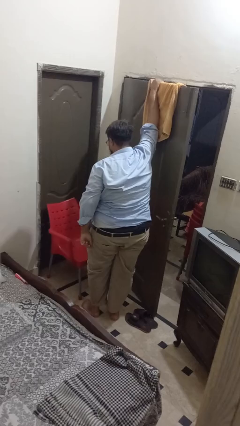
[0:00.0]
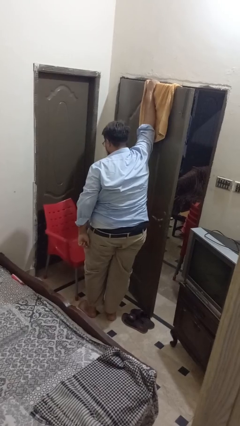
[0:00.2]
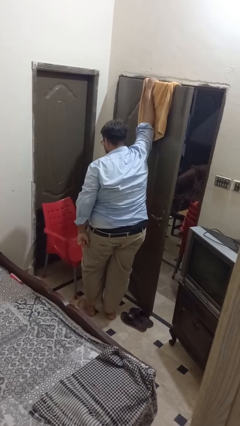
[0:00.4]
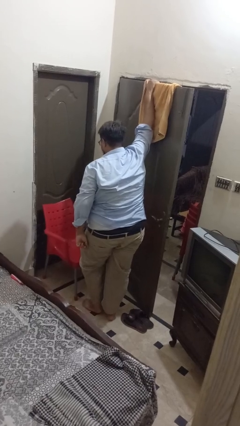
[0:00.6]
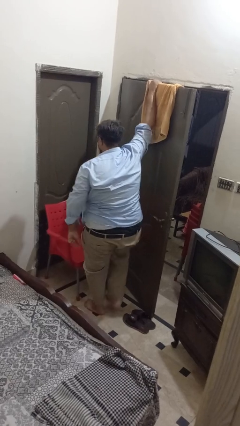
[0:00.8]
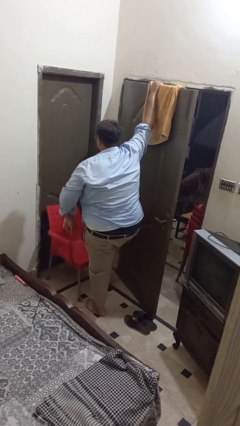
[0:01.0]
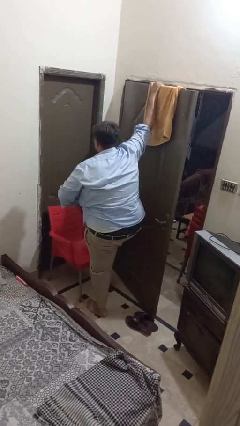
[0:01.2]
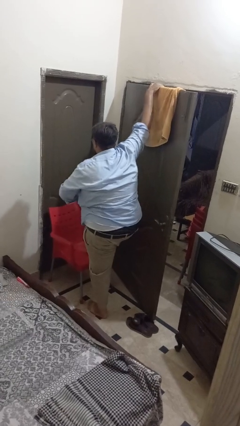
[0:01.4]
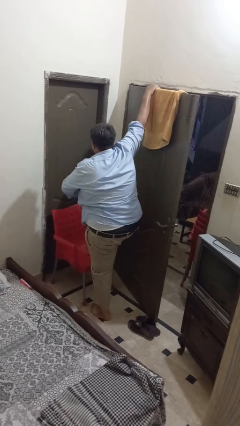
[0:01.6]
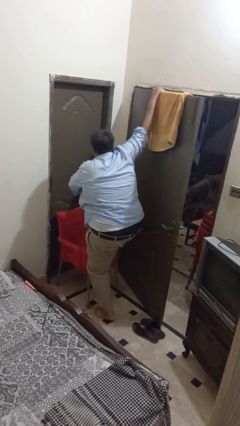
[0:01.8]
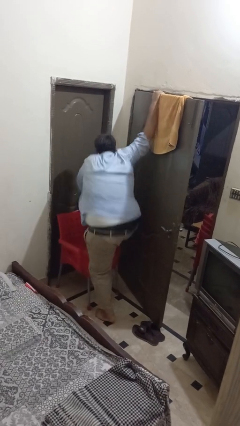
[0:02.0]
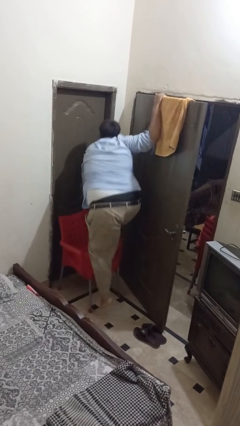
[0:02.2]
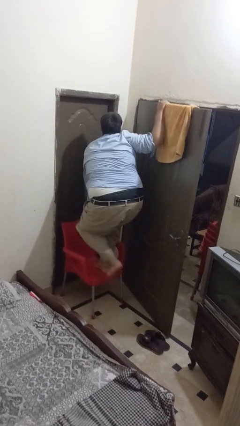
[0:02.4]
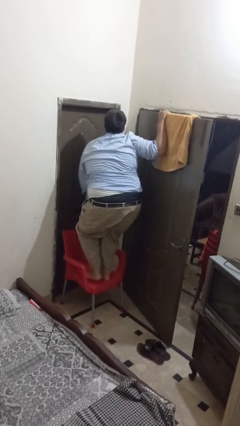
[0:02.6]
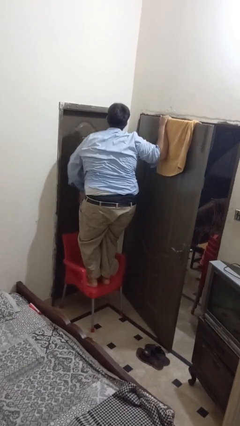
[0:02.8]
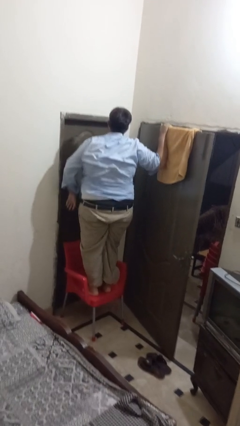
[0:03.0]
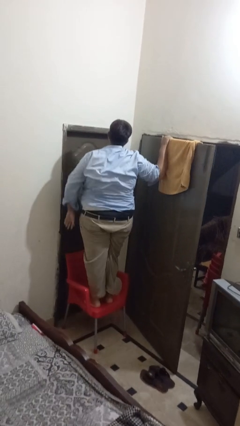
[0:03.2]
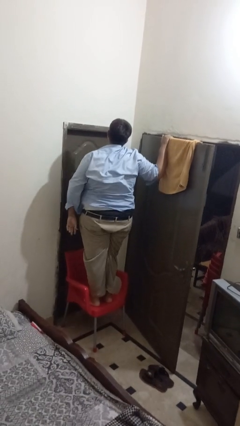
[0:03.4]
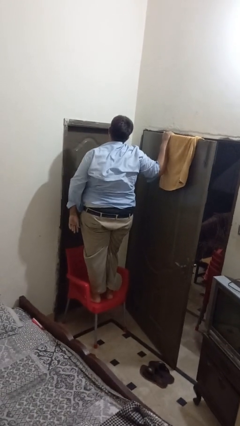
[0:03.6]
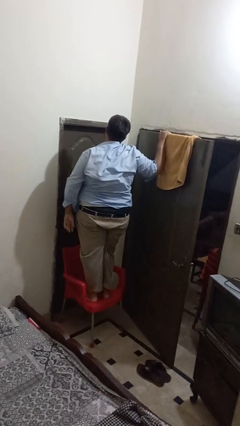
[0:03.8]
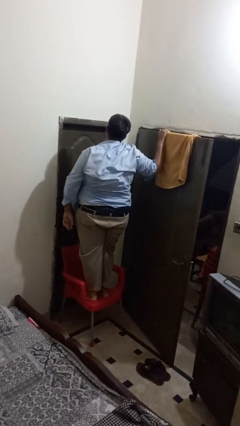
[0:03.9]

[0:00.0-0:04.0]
person climbs on chair

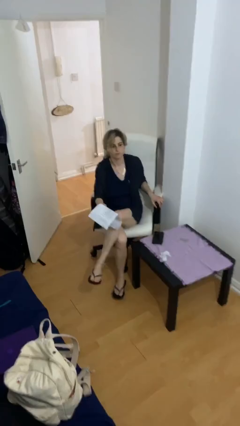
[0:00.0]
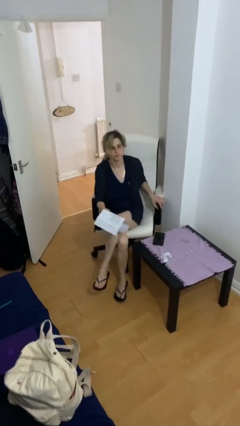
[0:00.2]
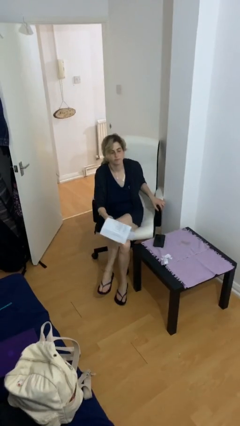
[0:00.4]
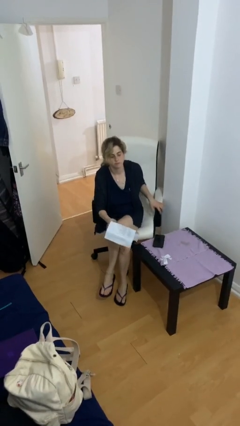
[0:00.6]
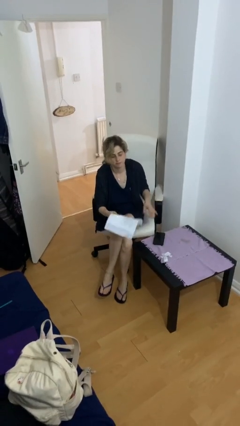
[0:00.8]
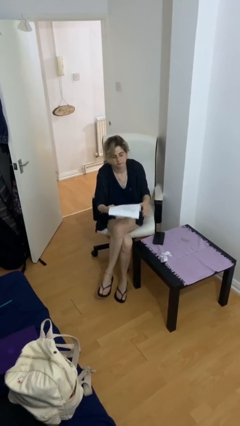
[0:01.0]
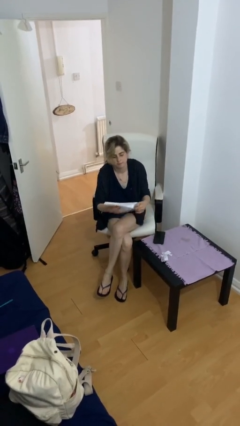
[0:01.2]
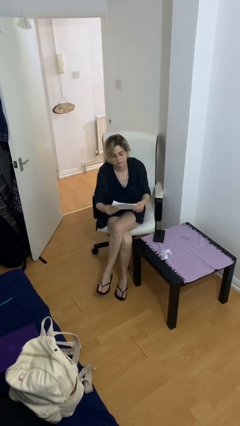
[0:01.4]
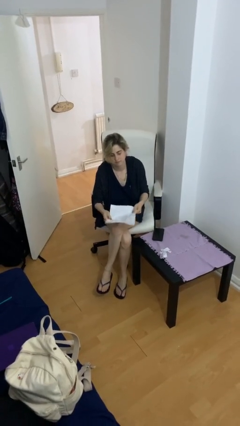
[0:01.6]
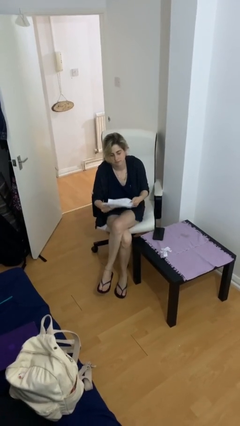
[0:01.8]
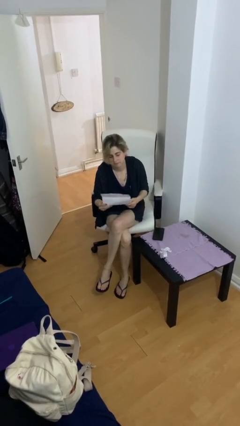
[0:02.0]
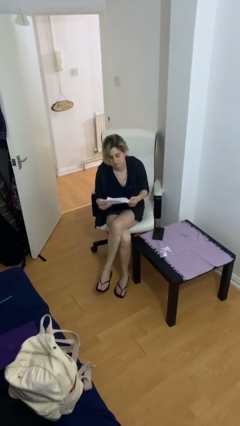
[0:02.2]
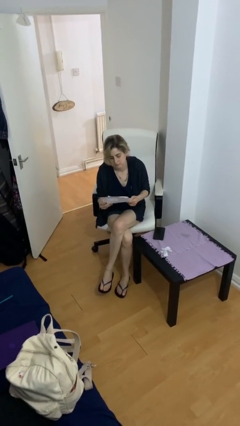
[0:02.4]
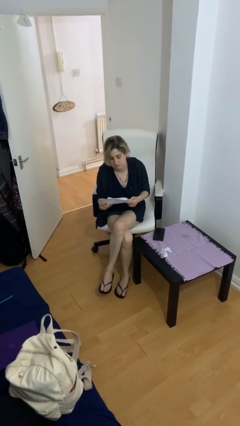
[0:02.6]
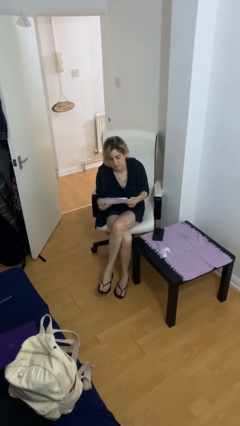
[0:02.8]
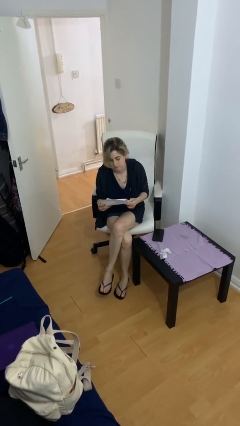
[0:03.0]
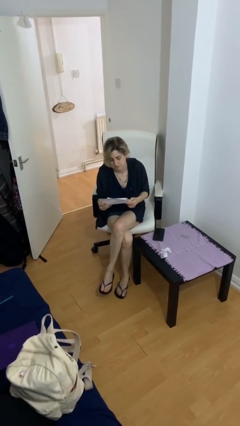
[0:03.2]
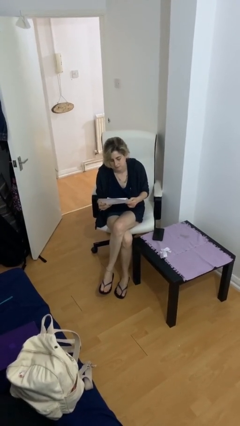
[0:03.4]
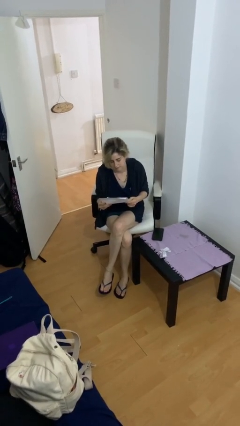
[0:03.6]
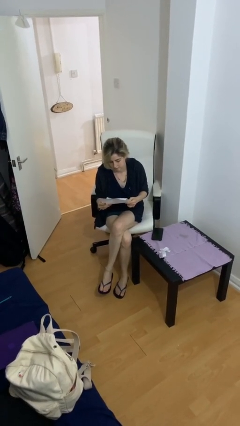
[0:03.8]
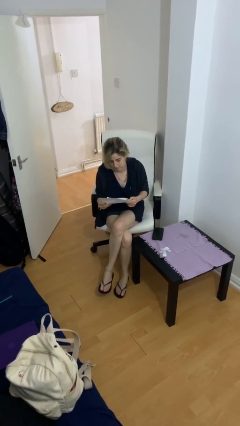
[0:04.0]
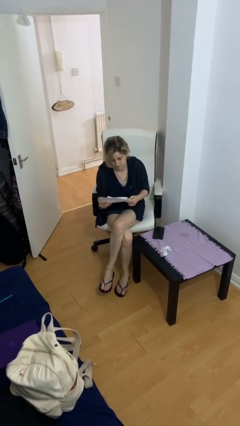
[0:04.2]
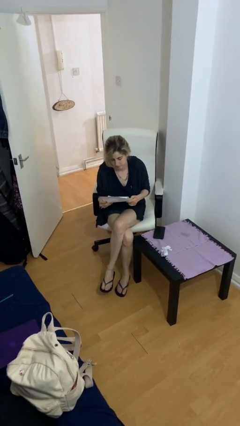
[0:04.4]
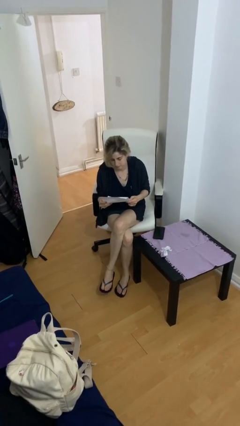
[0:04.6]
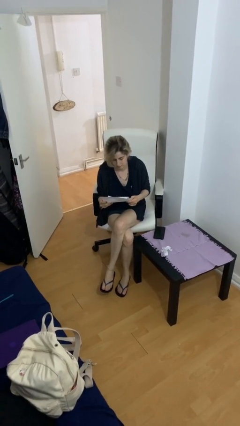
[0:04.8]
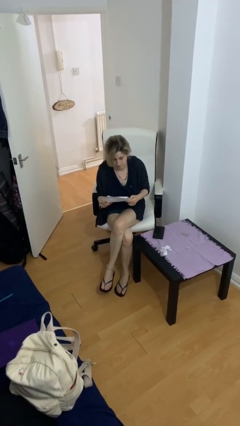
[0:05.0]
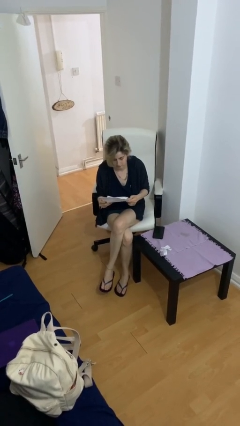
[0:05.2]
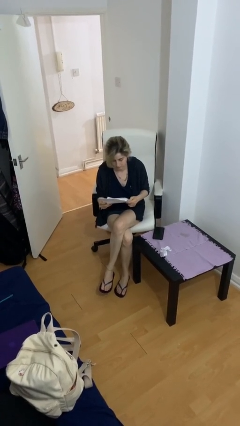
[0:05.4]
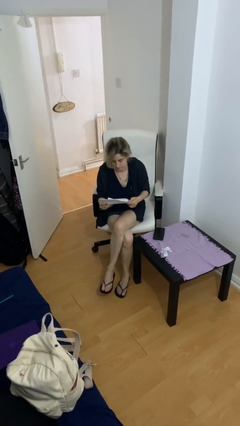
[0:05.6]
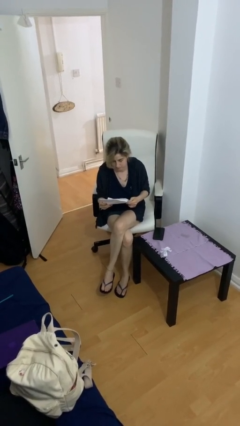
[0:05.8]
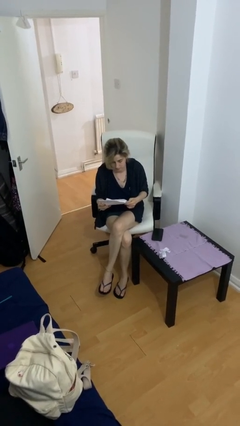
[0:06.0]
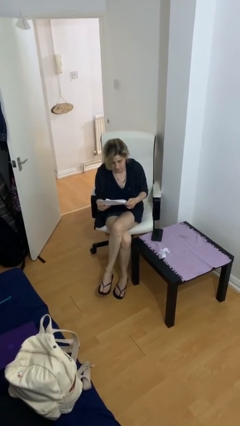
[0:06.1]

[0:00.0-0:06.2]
person reads document

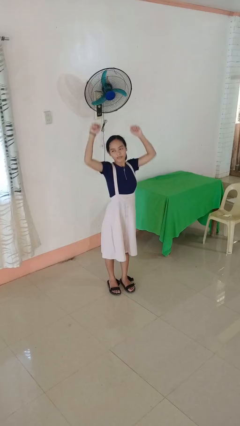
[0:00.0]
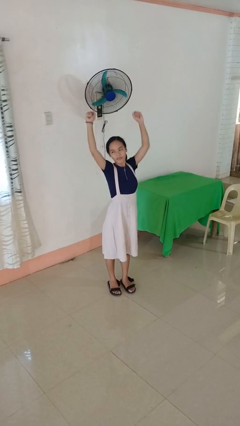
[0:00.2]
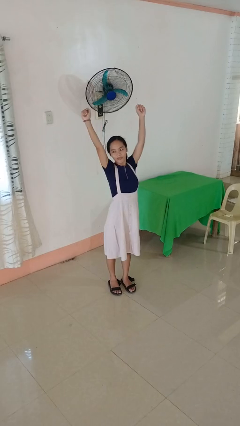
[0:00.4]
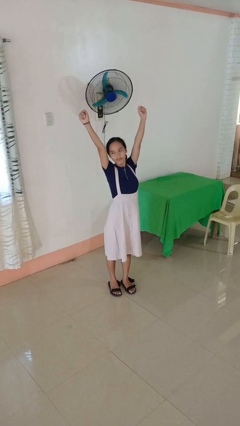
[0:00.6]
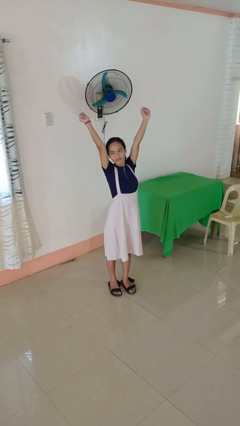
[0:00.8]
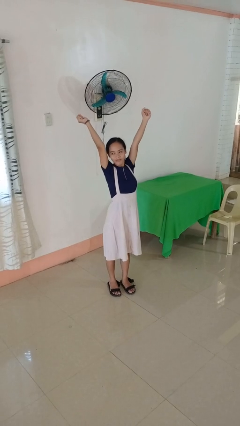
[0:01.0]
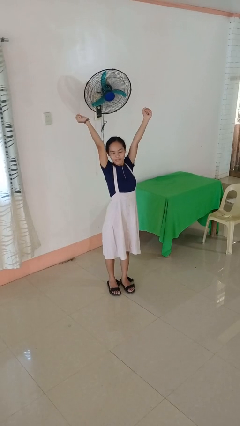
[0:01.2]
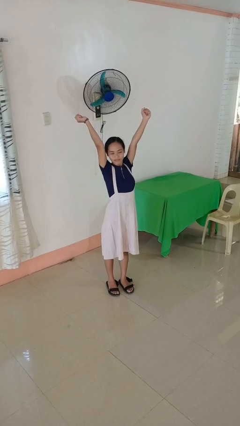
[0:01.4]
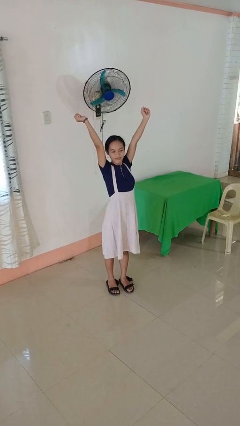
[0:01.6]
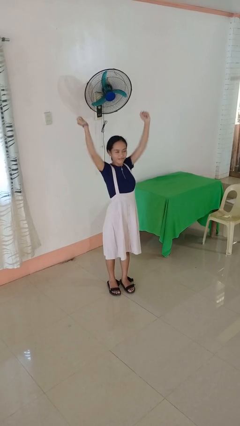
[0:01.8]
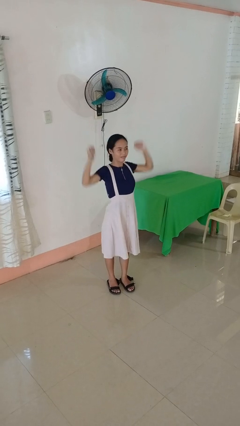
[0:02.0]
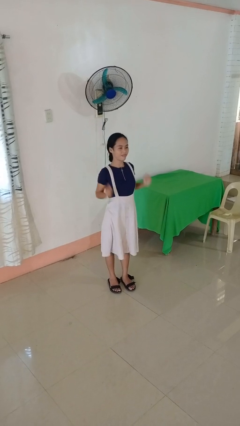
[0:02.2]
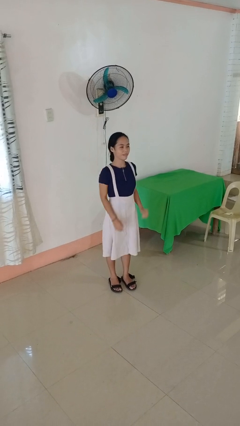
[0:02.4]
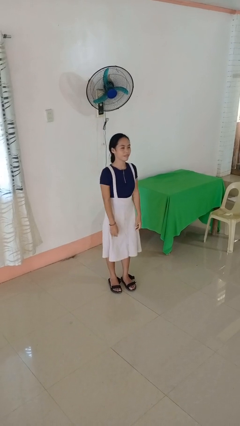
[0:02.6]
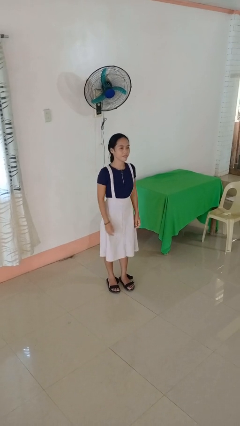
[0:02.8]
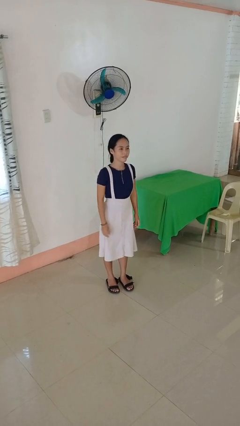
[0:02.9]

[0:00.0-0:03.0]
person stretches arms over head

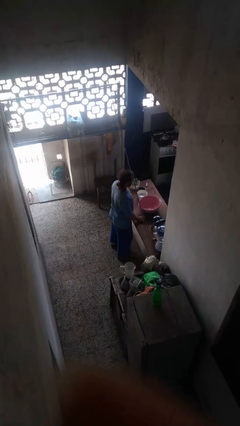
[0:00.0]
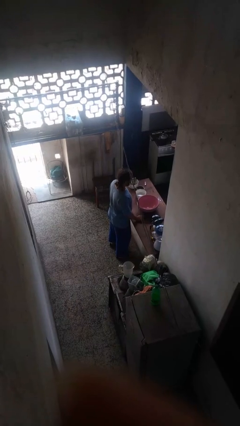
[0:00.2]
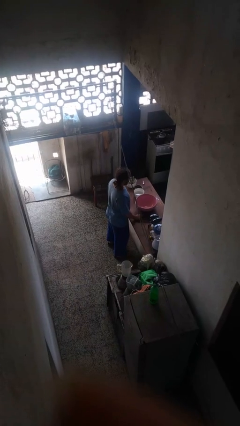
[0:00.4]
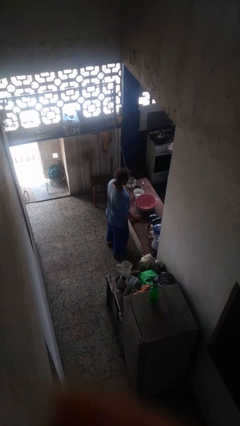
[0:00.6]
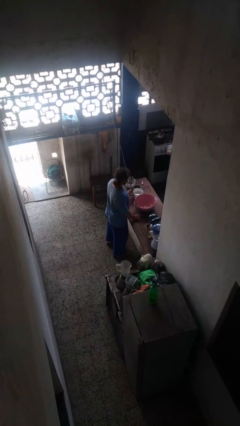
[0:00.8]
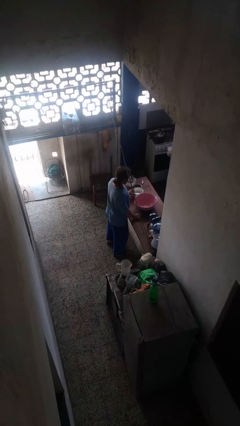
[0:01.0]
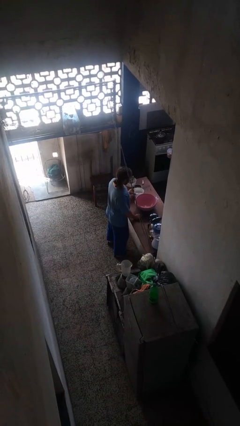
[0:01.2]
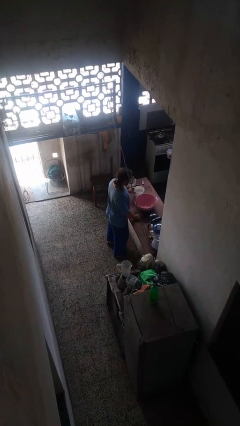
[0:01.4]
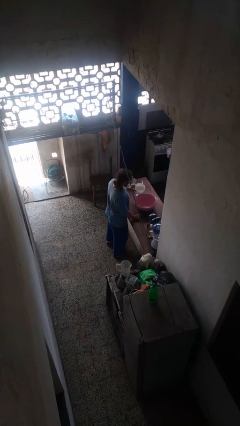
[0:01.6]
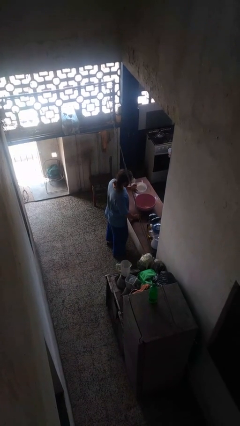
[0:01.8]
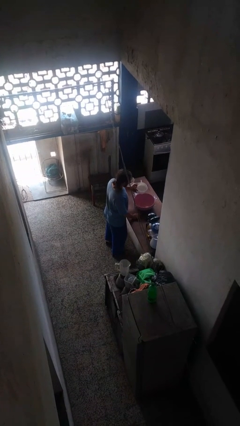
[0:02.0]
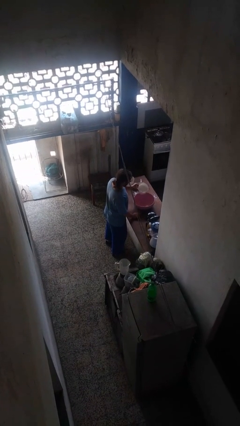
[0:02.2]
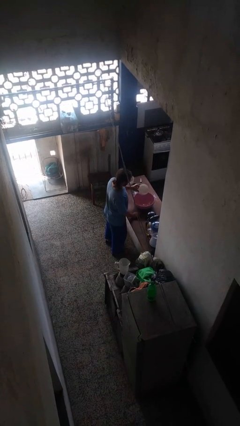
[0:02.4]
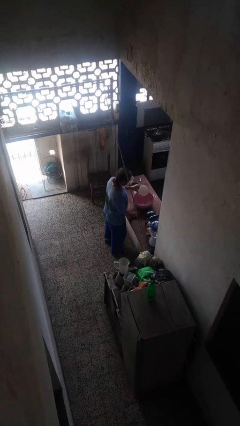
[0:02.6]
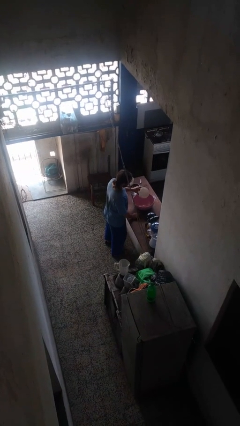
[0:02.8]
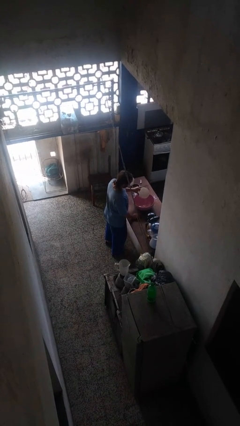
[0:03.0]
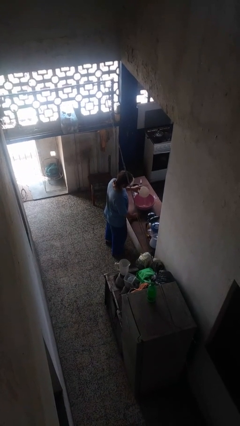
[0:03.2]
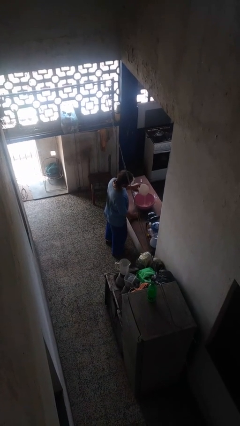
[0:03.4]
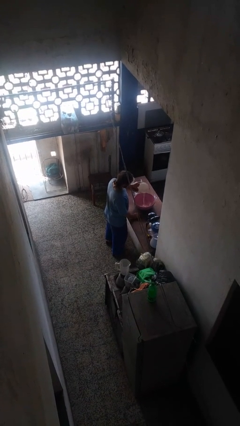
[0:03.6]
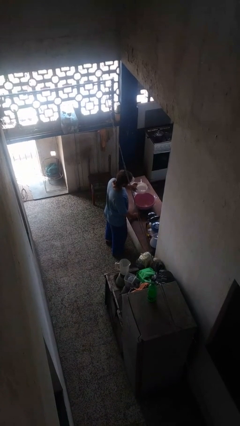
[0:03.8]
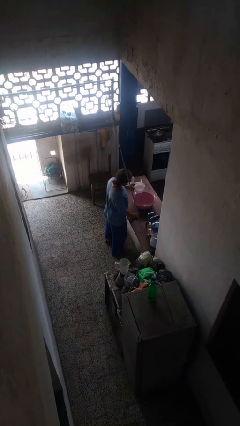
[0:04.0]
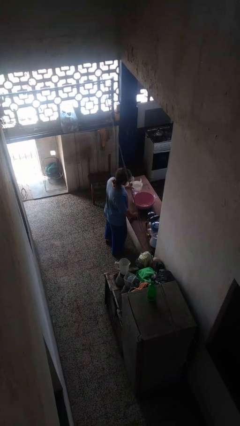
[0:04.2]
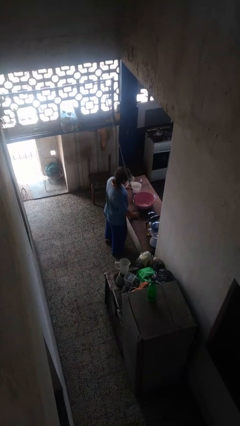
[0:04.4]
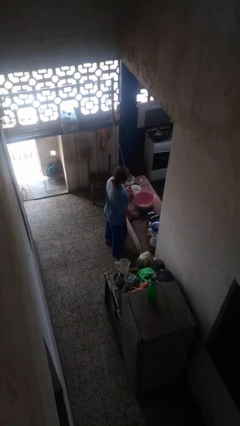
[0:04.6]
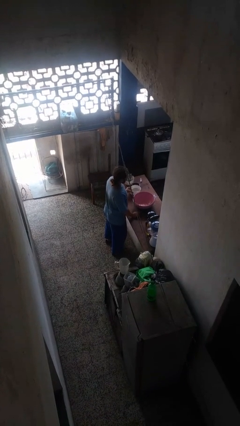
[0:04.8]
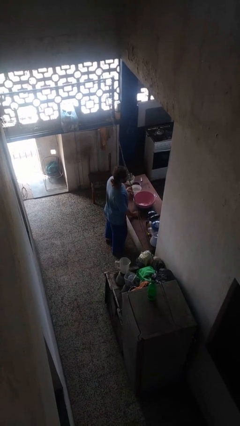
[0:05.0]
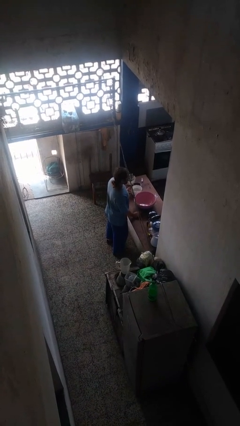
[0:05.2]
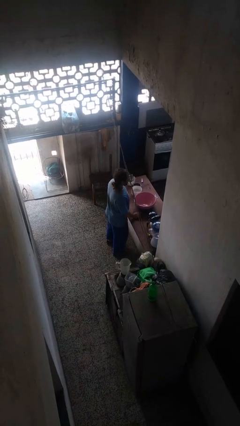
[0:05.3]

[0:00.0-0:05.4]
person pours into bowl
